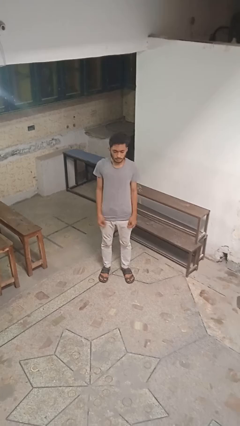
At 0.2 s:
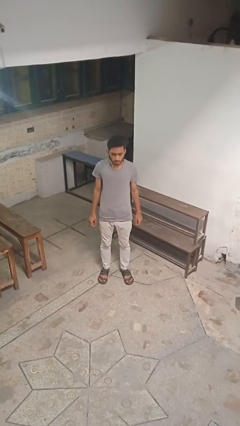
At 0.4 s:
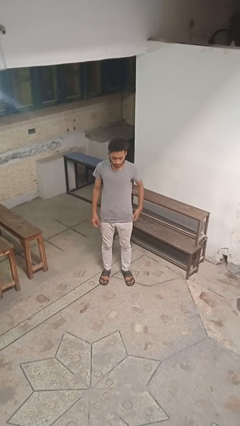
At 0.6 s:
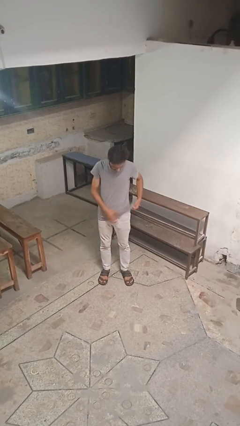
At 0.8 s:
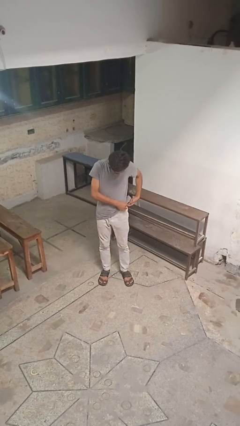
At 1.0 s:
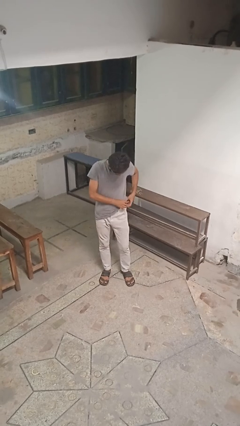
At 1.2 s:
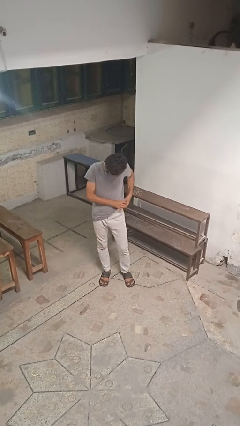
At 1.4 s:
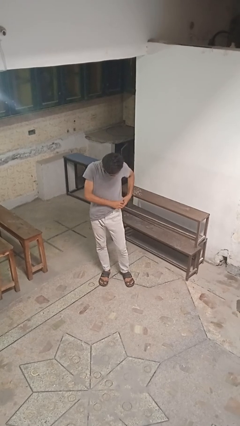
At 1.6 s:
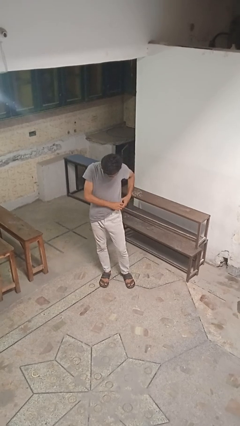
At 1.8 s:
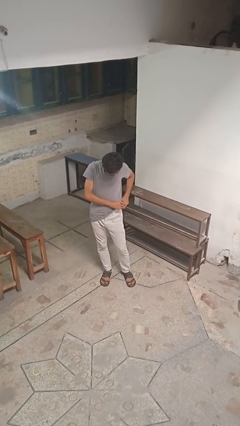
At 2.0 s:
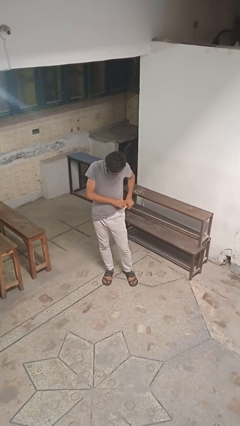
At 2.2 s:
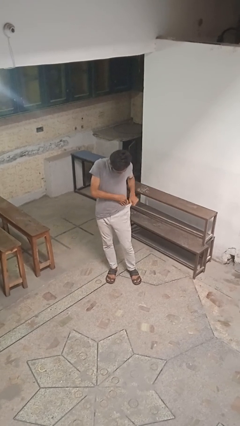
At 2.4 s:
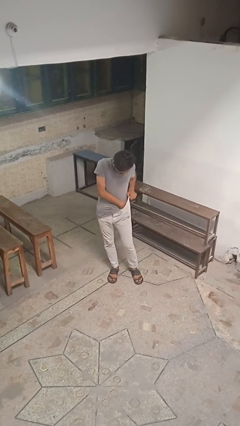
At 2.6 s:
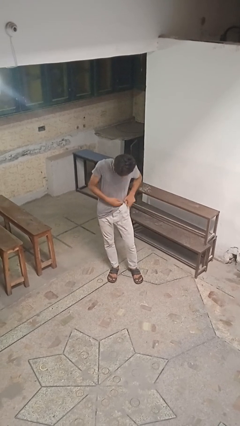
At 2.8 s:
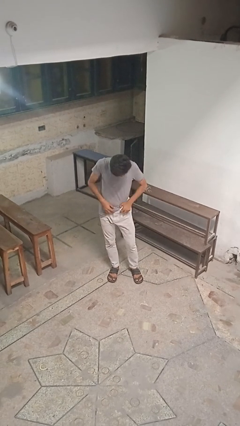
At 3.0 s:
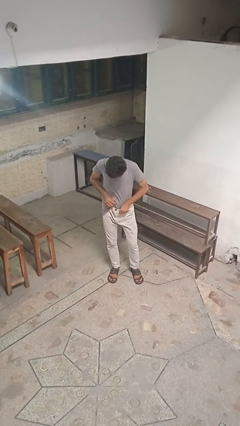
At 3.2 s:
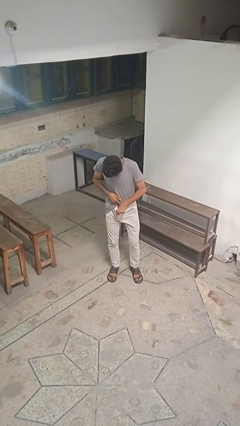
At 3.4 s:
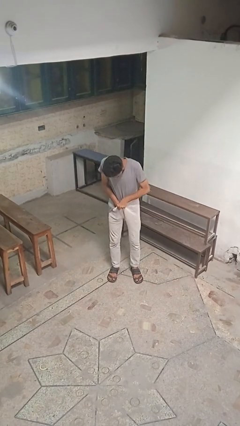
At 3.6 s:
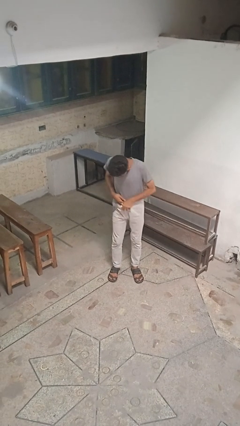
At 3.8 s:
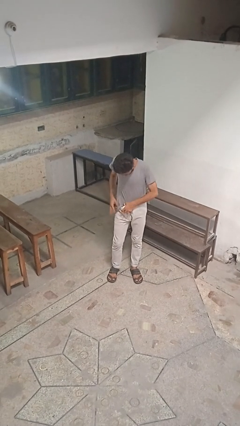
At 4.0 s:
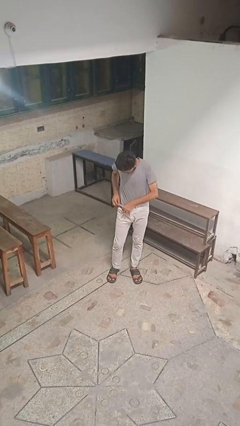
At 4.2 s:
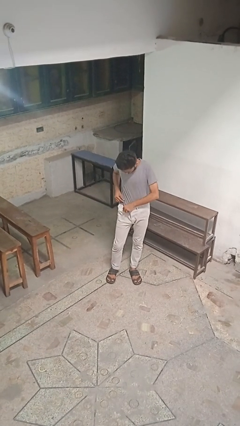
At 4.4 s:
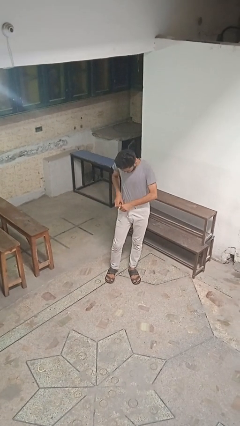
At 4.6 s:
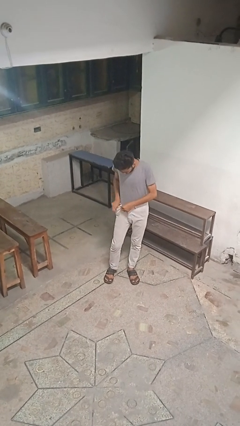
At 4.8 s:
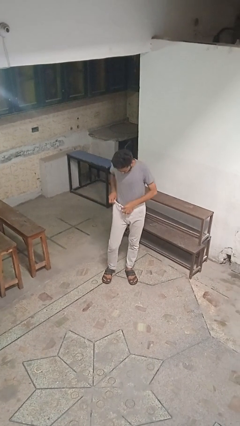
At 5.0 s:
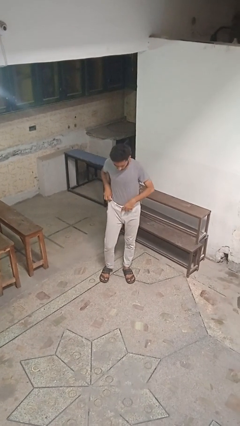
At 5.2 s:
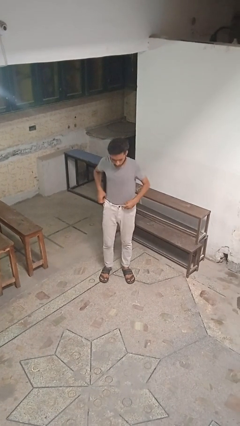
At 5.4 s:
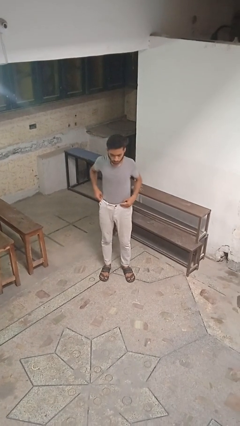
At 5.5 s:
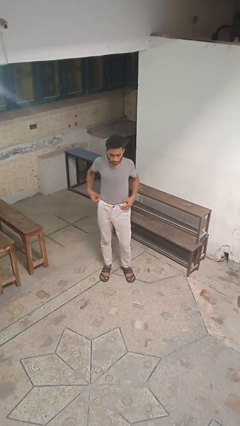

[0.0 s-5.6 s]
person tucks in shirt

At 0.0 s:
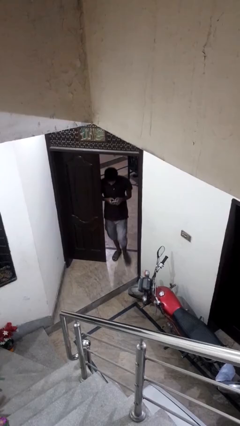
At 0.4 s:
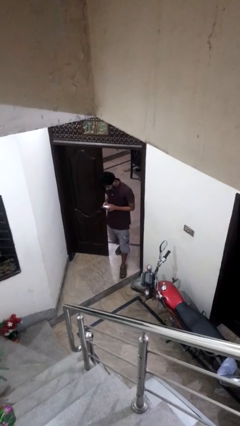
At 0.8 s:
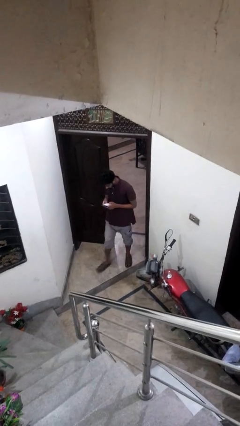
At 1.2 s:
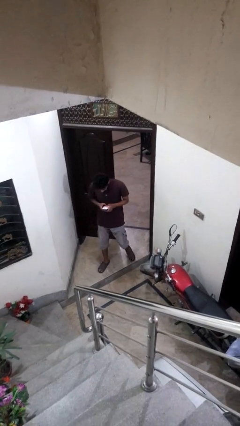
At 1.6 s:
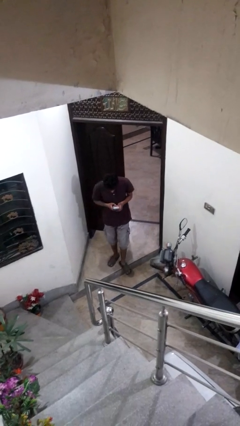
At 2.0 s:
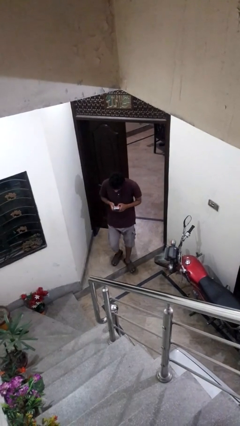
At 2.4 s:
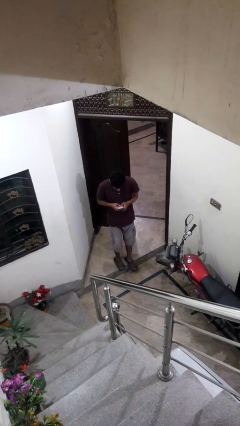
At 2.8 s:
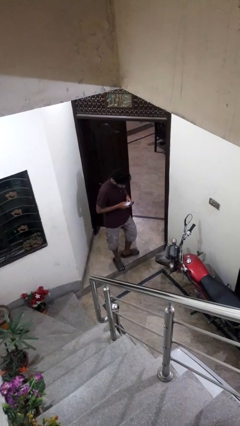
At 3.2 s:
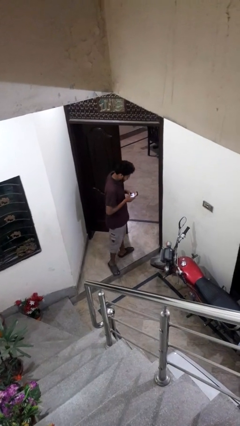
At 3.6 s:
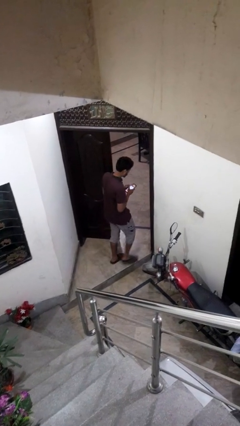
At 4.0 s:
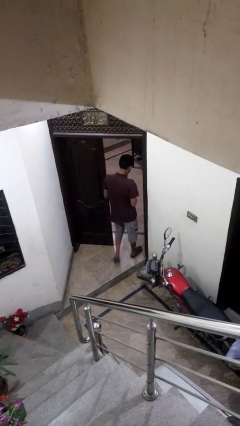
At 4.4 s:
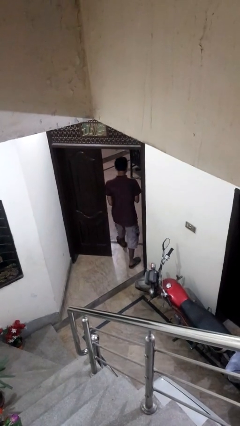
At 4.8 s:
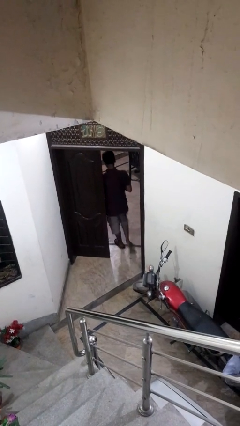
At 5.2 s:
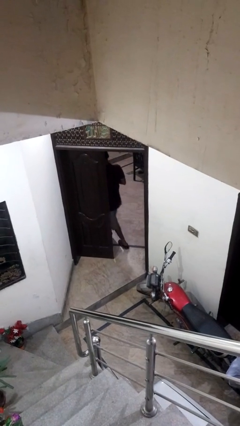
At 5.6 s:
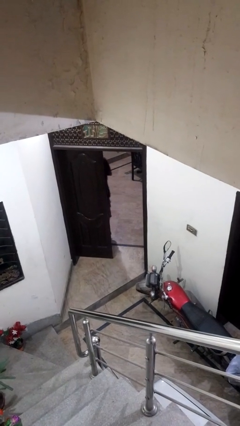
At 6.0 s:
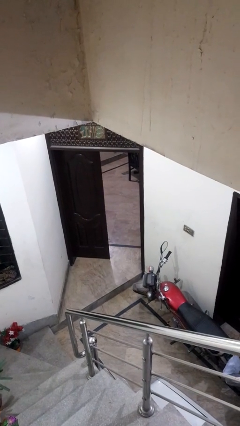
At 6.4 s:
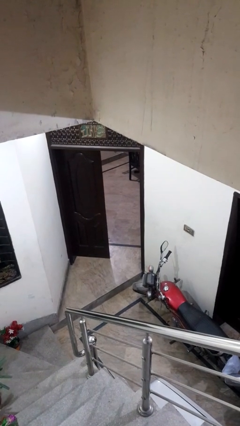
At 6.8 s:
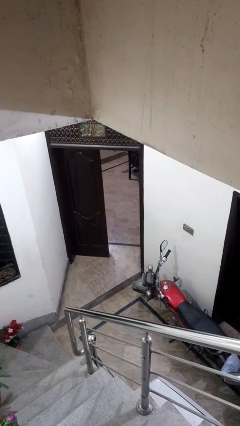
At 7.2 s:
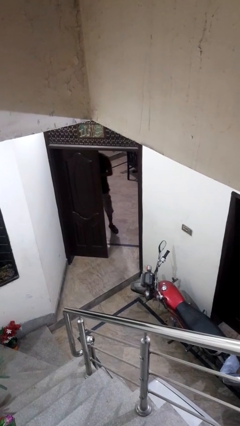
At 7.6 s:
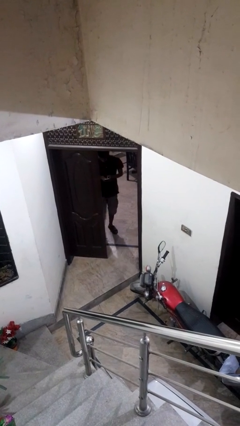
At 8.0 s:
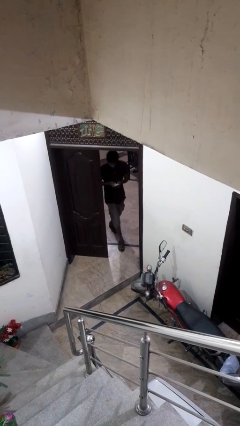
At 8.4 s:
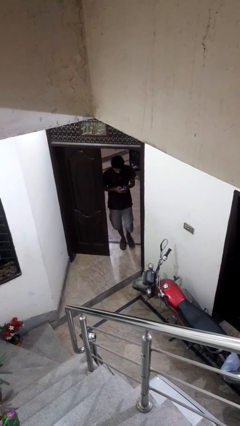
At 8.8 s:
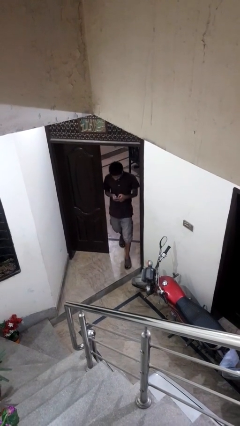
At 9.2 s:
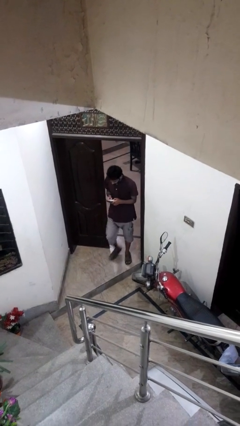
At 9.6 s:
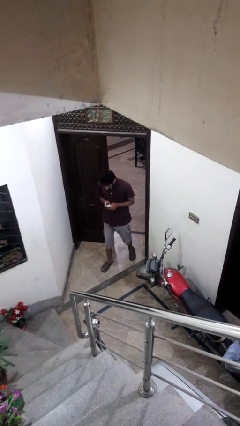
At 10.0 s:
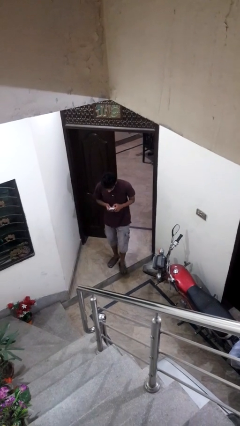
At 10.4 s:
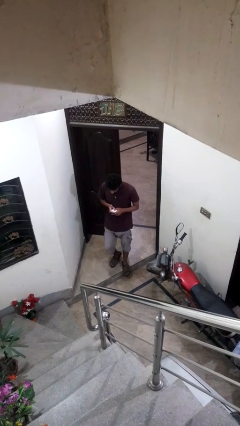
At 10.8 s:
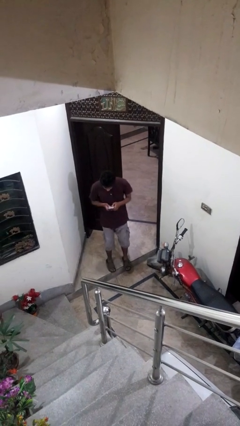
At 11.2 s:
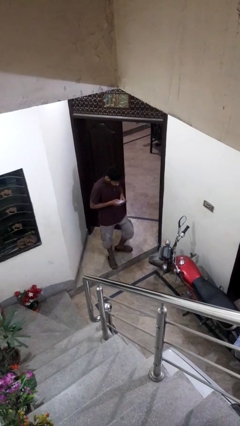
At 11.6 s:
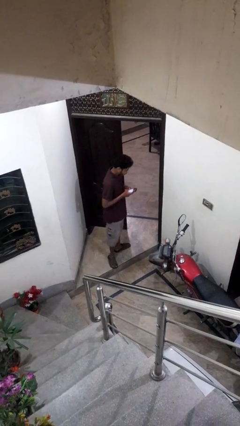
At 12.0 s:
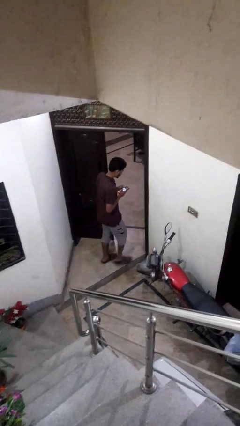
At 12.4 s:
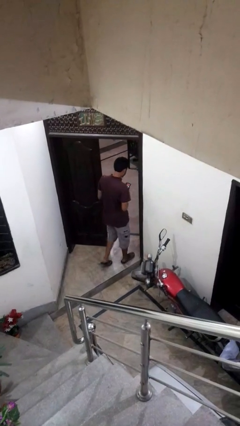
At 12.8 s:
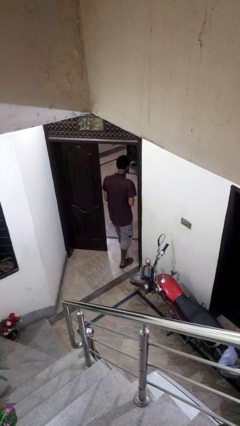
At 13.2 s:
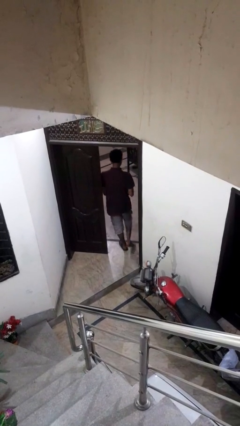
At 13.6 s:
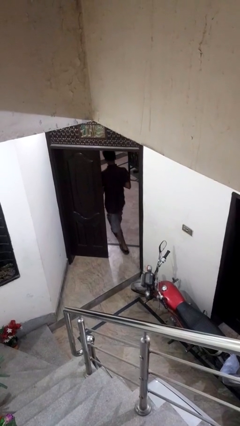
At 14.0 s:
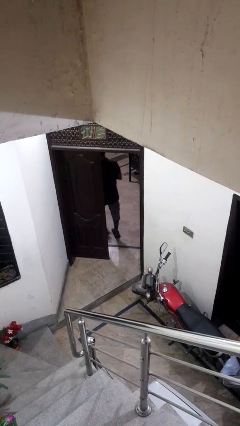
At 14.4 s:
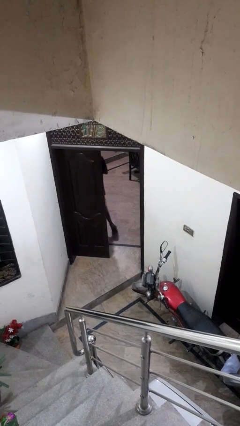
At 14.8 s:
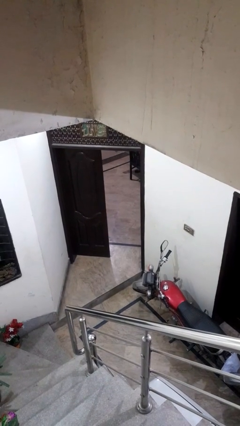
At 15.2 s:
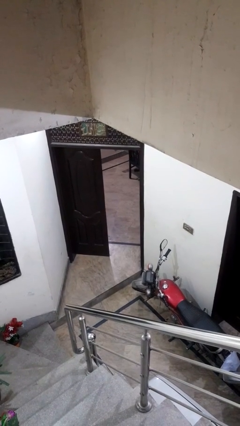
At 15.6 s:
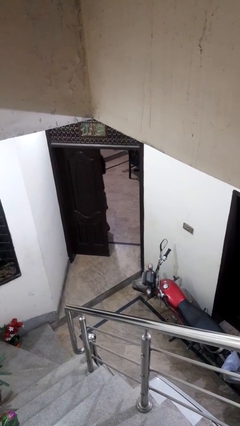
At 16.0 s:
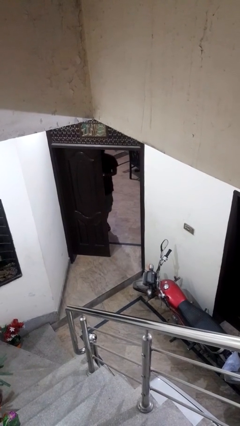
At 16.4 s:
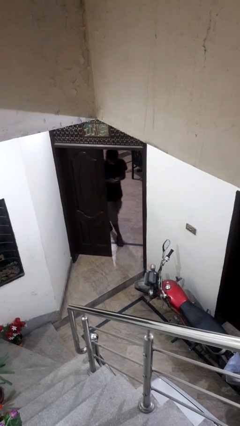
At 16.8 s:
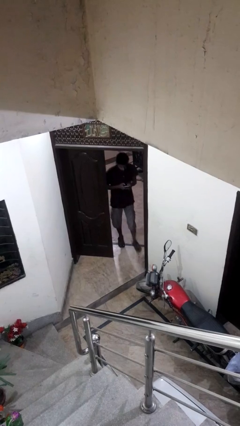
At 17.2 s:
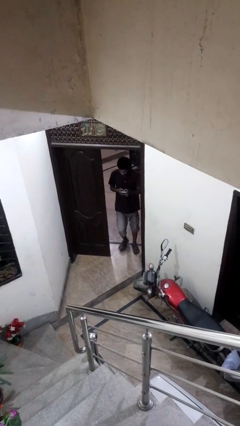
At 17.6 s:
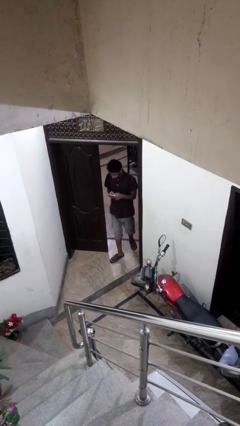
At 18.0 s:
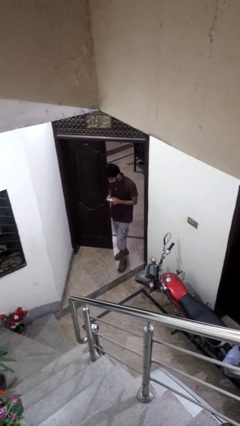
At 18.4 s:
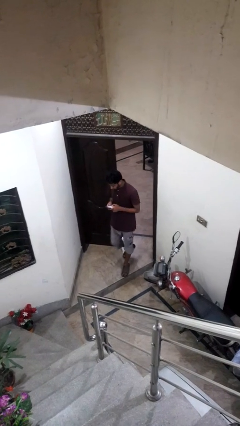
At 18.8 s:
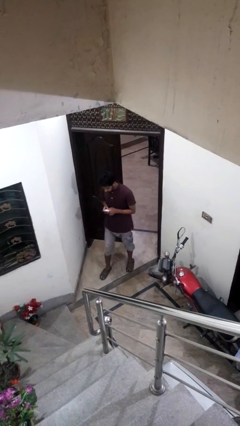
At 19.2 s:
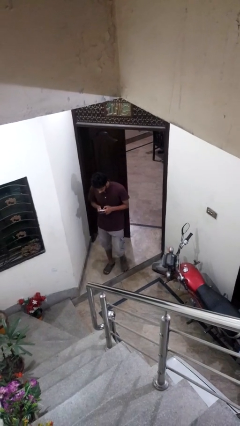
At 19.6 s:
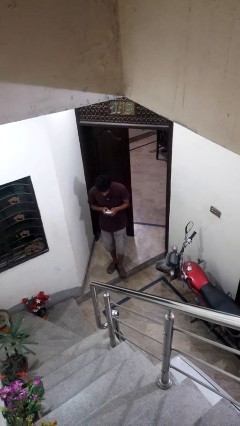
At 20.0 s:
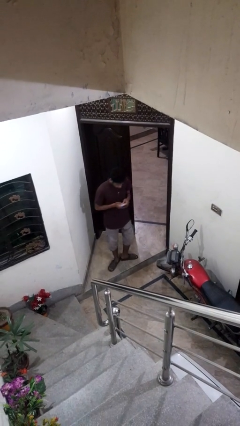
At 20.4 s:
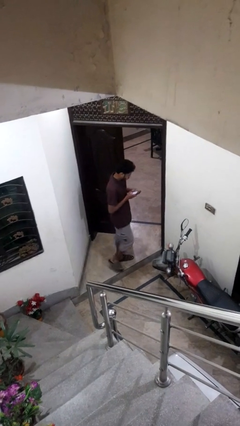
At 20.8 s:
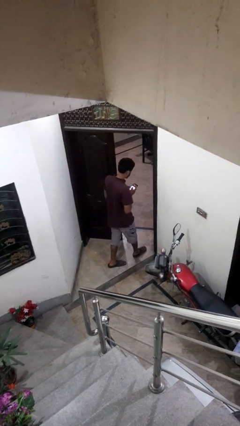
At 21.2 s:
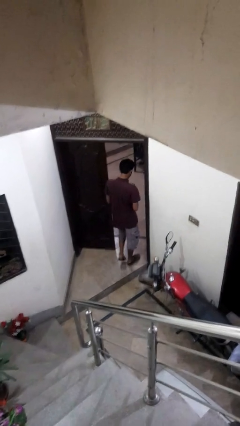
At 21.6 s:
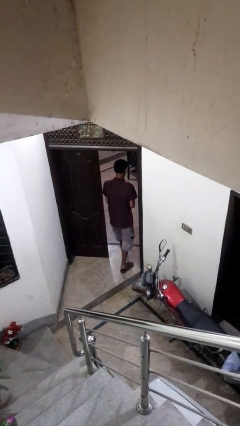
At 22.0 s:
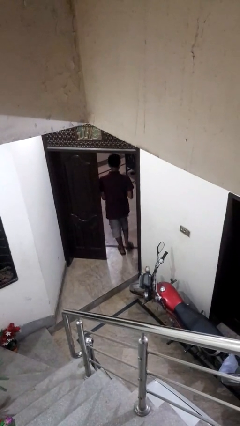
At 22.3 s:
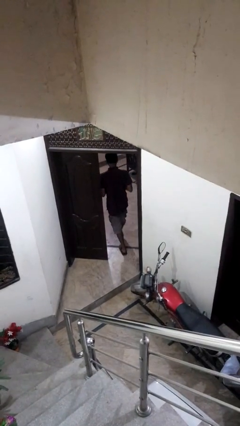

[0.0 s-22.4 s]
person texts on phone

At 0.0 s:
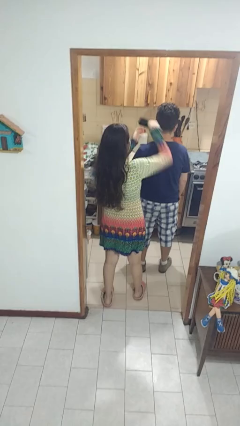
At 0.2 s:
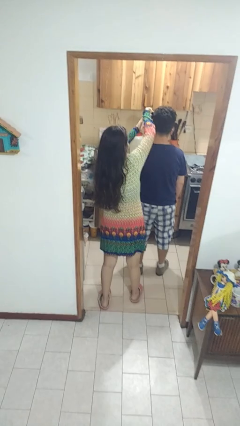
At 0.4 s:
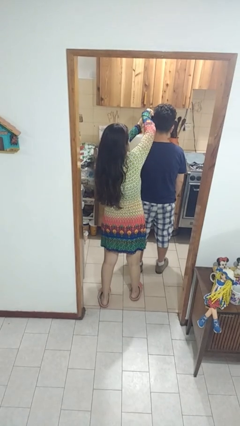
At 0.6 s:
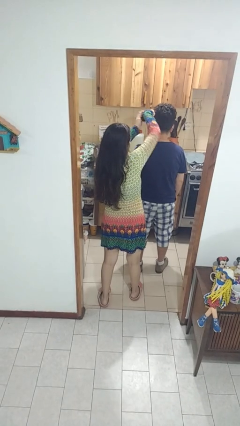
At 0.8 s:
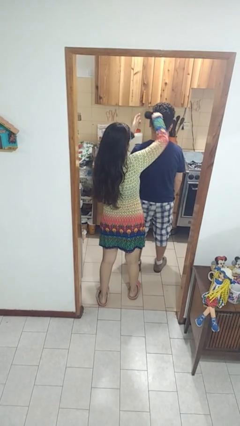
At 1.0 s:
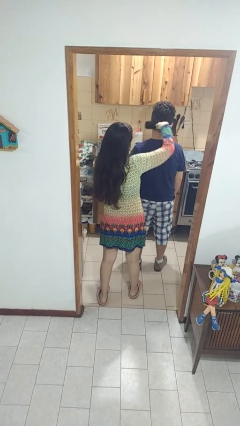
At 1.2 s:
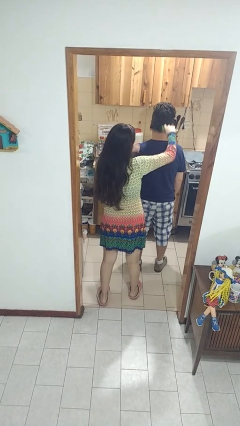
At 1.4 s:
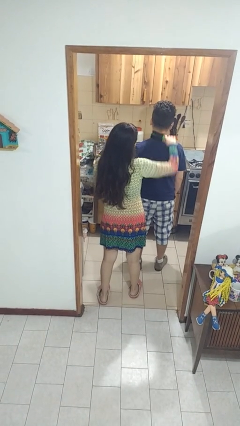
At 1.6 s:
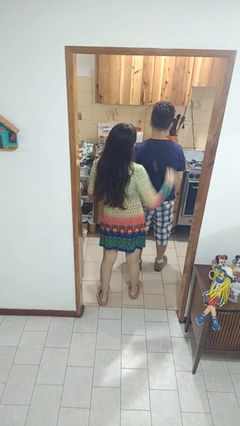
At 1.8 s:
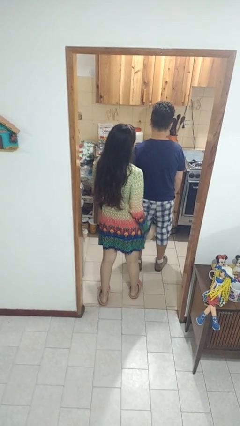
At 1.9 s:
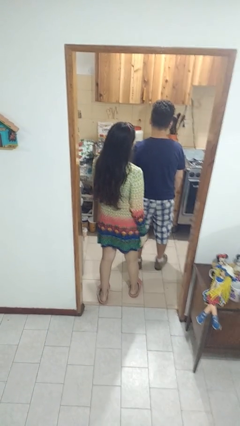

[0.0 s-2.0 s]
person brushes hair of person
